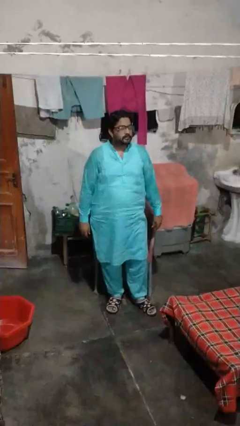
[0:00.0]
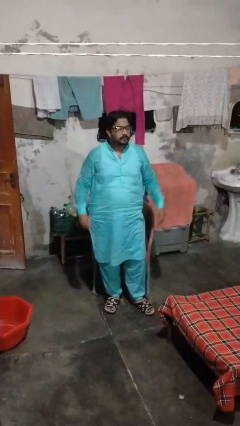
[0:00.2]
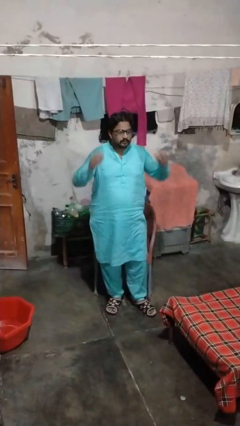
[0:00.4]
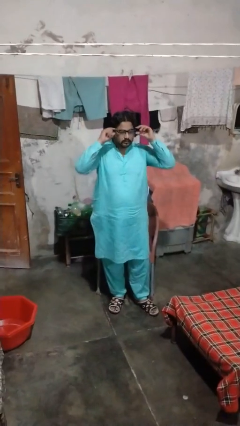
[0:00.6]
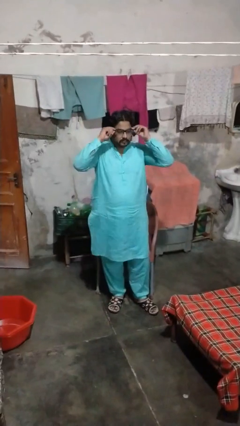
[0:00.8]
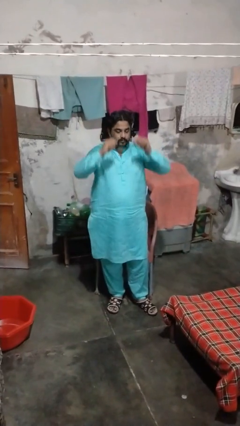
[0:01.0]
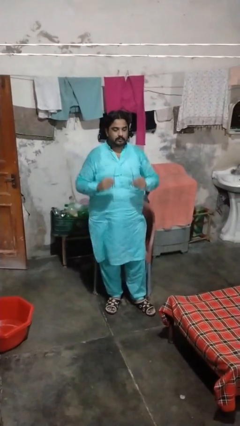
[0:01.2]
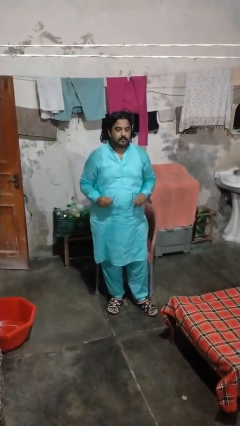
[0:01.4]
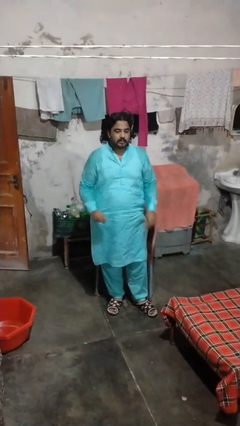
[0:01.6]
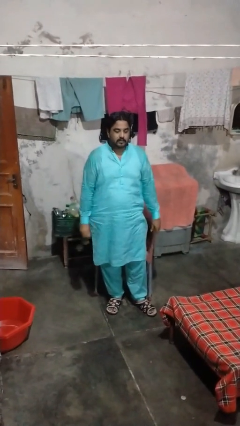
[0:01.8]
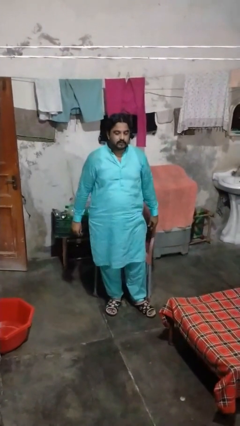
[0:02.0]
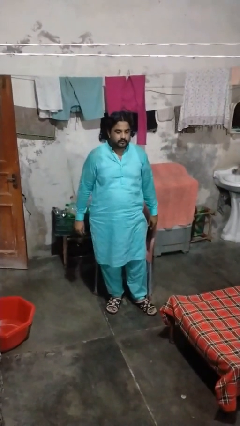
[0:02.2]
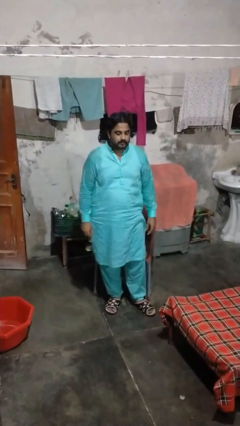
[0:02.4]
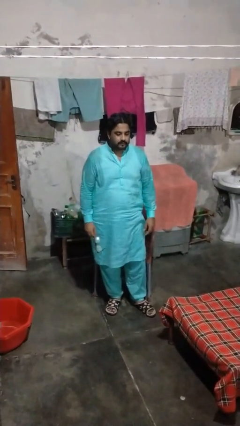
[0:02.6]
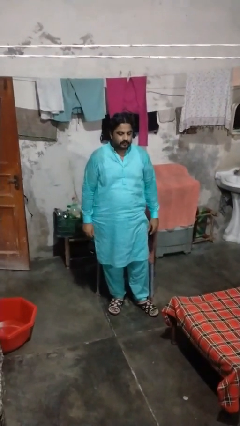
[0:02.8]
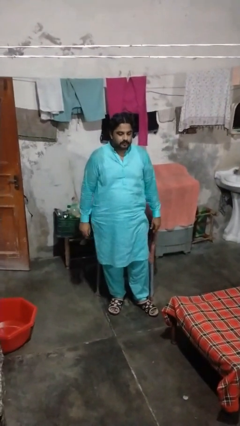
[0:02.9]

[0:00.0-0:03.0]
person takes off glasses

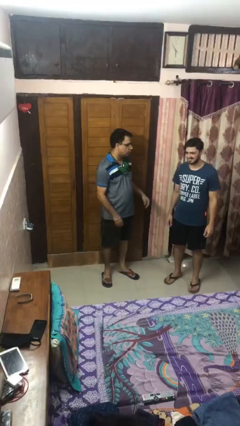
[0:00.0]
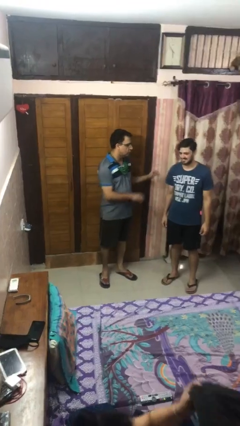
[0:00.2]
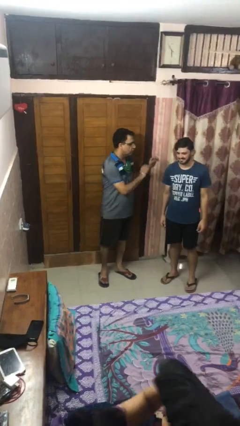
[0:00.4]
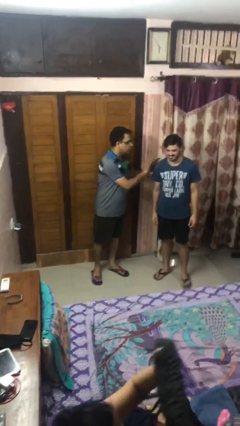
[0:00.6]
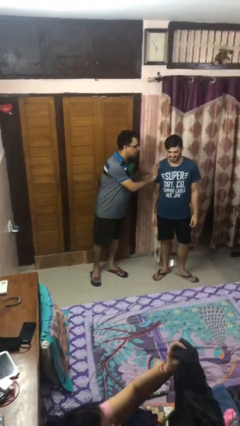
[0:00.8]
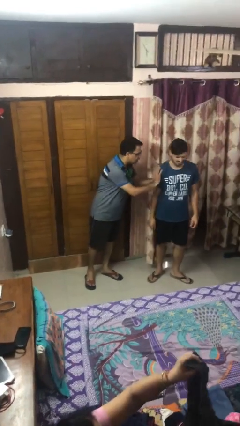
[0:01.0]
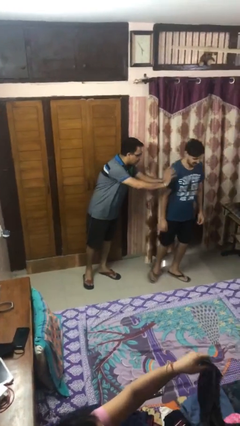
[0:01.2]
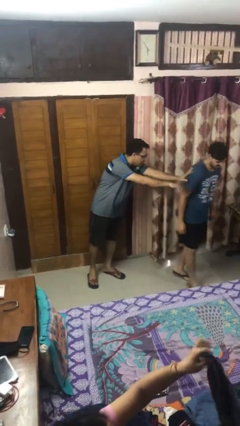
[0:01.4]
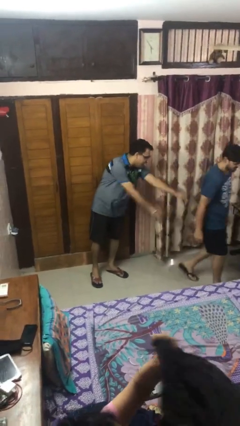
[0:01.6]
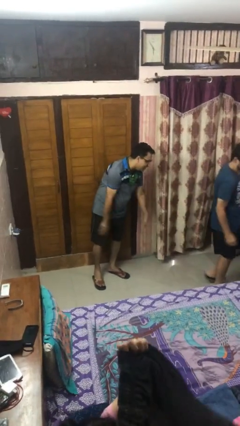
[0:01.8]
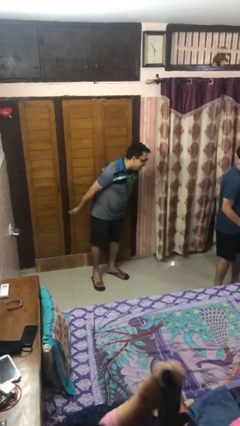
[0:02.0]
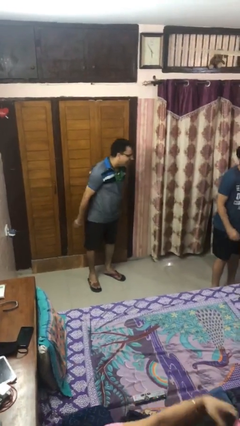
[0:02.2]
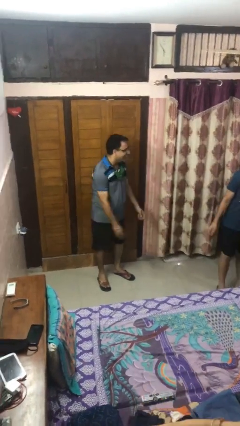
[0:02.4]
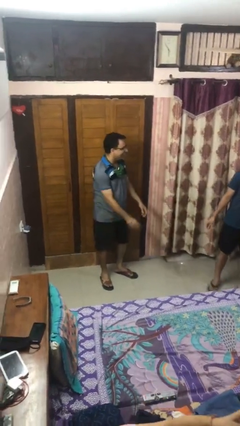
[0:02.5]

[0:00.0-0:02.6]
person shoves person

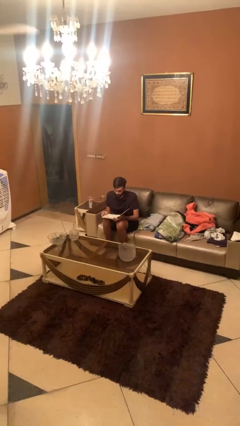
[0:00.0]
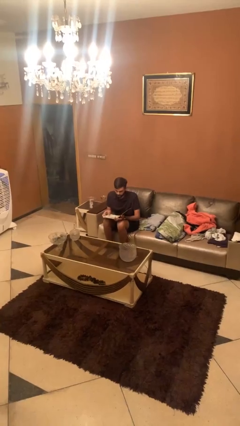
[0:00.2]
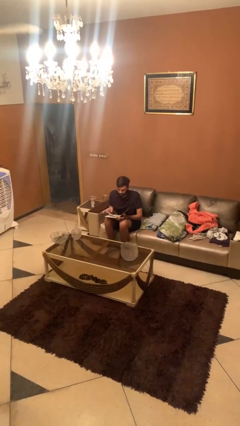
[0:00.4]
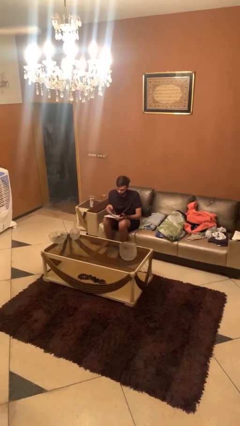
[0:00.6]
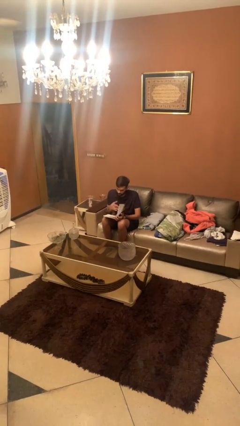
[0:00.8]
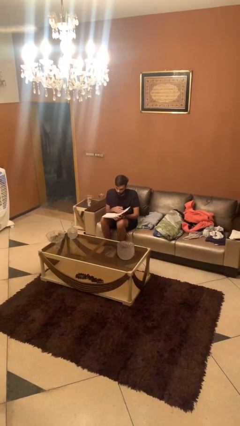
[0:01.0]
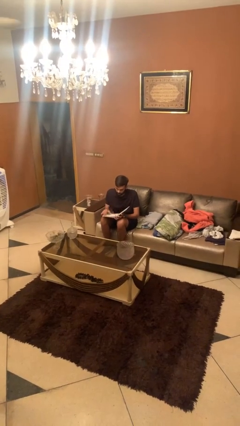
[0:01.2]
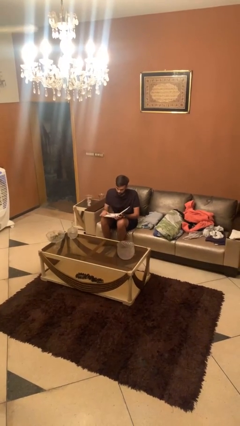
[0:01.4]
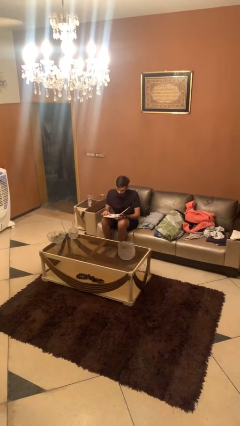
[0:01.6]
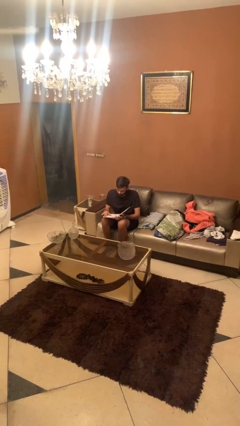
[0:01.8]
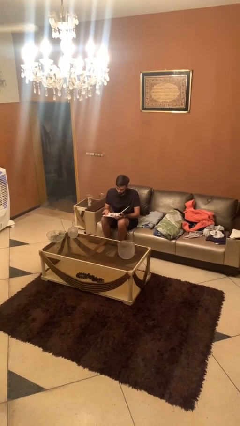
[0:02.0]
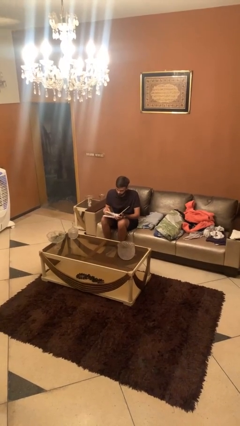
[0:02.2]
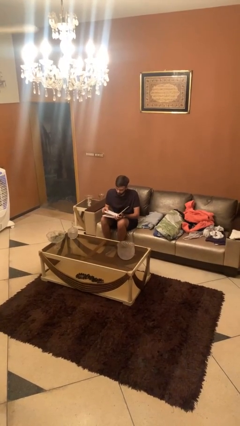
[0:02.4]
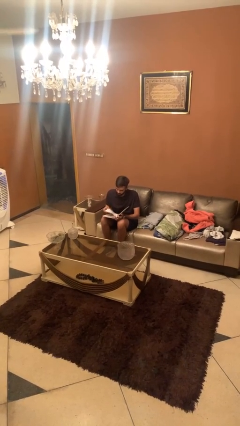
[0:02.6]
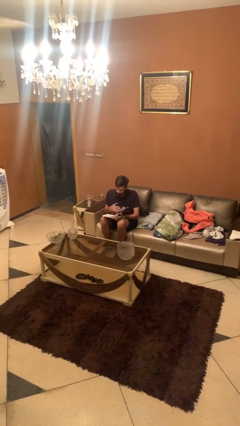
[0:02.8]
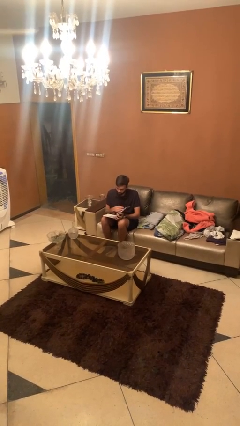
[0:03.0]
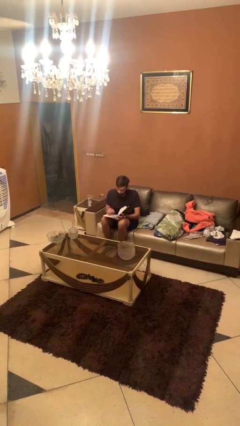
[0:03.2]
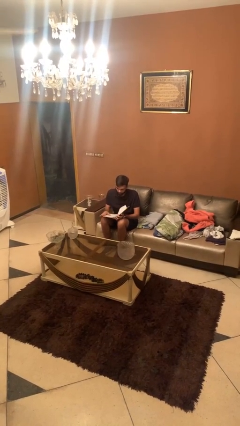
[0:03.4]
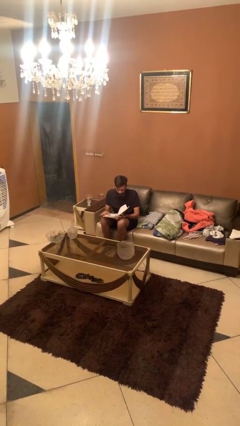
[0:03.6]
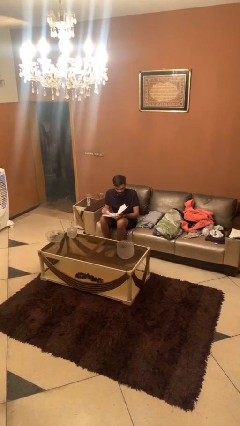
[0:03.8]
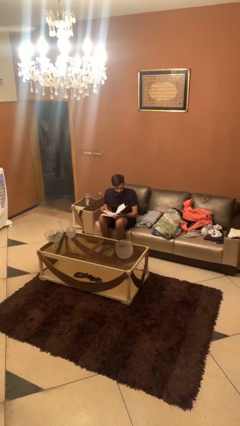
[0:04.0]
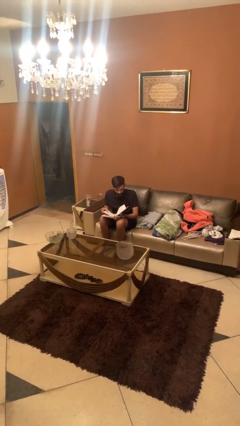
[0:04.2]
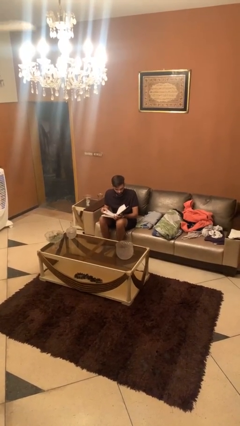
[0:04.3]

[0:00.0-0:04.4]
person reads document

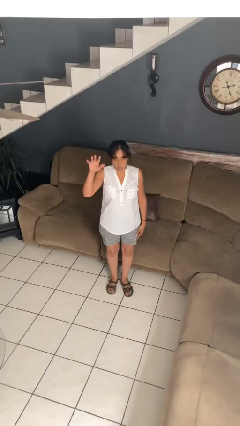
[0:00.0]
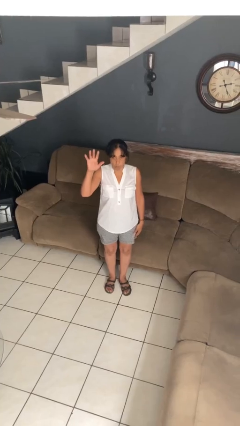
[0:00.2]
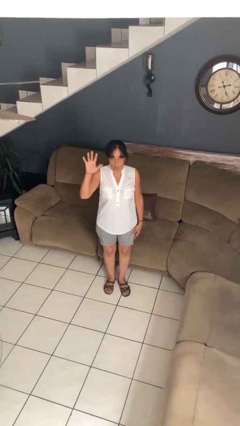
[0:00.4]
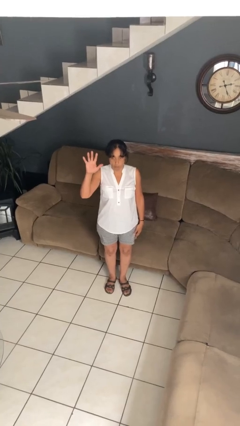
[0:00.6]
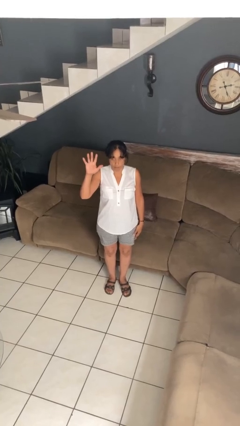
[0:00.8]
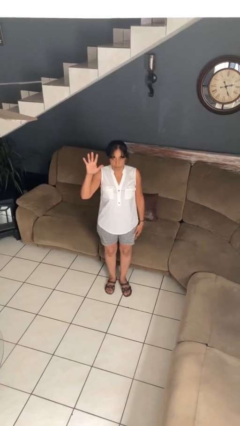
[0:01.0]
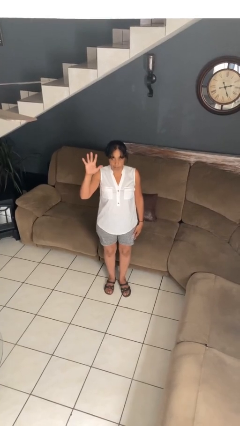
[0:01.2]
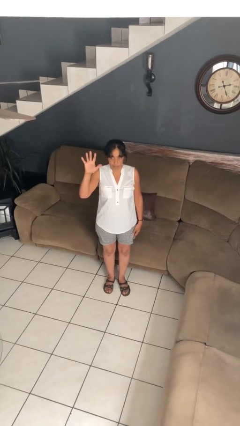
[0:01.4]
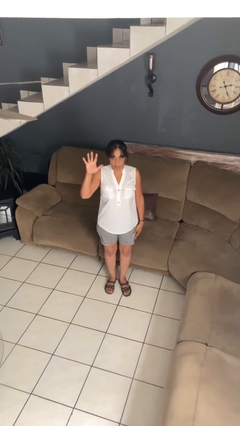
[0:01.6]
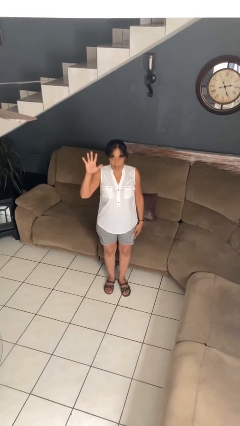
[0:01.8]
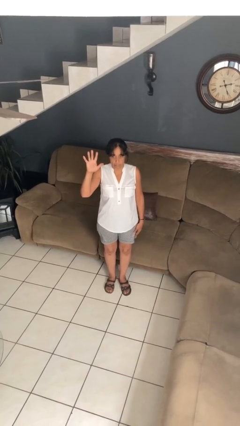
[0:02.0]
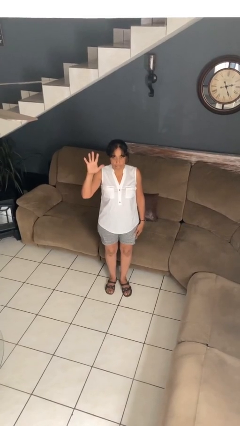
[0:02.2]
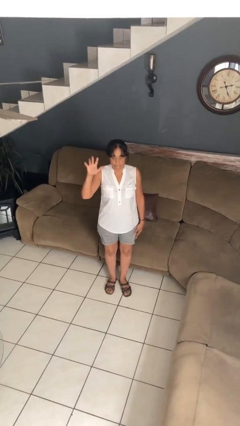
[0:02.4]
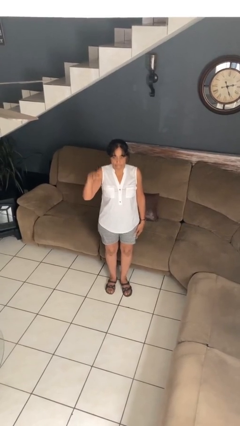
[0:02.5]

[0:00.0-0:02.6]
person gestures number five

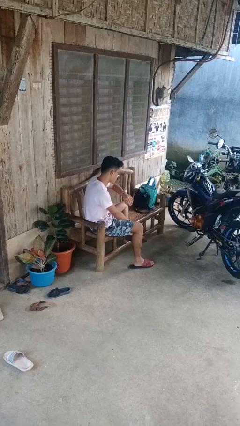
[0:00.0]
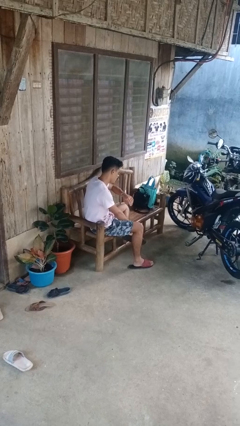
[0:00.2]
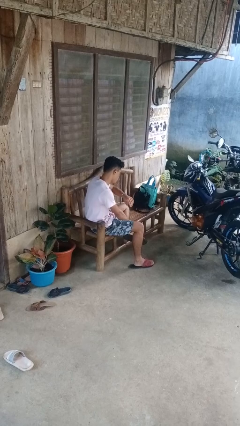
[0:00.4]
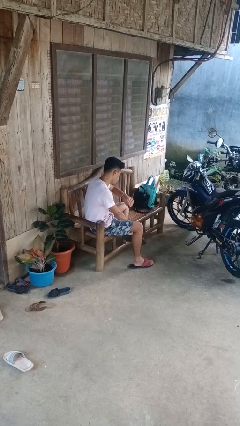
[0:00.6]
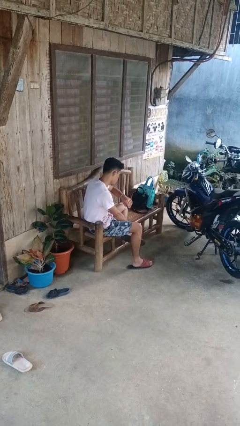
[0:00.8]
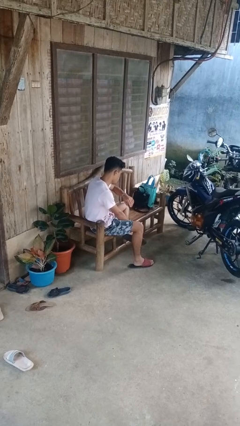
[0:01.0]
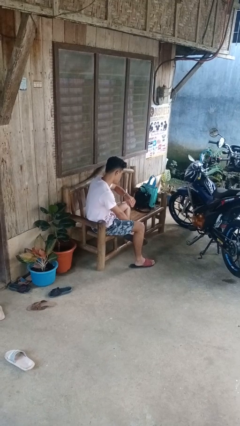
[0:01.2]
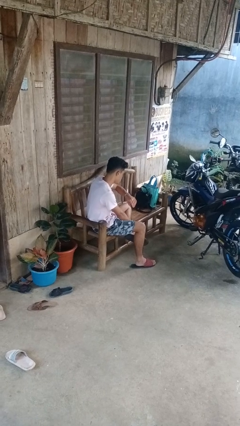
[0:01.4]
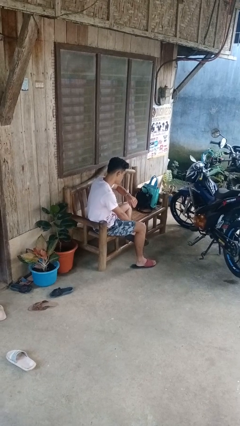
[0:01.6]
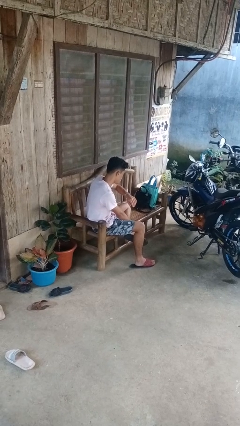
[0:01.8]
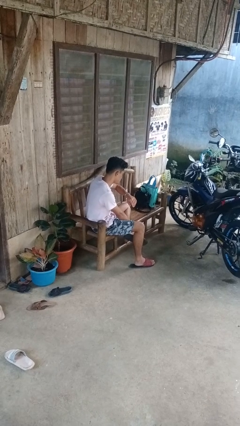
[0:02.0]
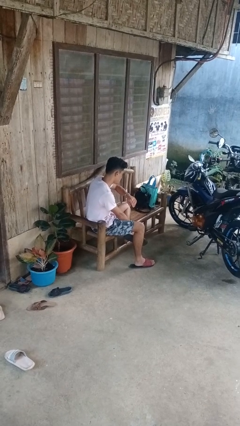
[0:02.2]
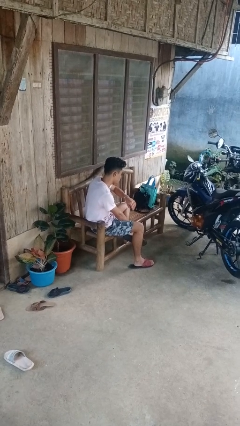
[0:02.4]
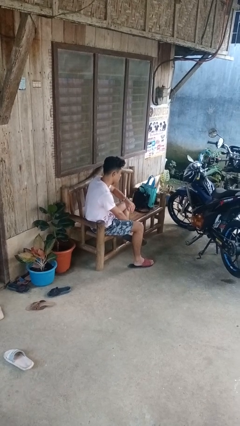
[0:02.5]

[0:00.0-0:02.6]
person looks at wristwatch

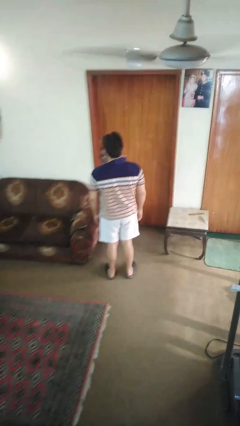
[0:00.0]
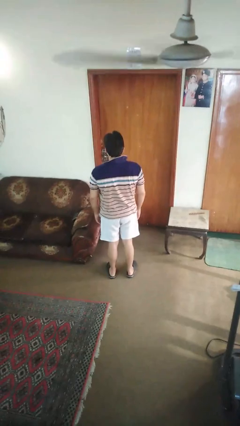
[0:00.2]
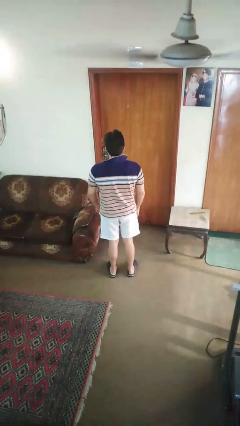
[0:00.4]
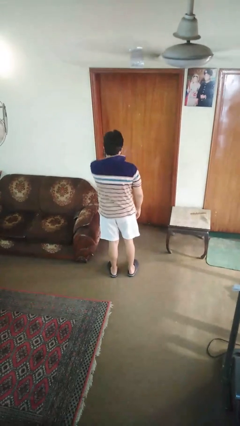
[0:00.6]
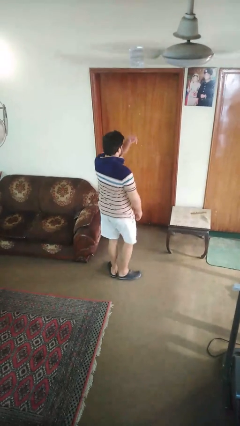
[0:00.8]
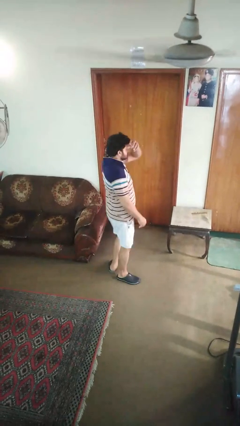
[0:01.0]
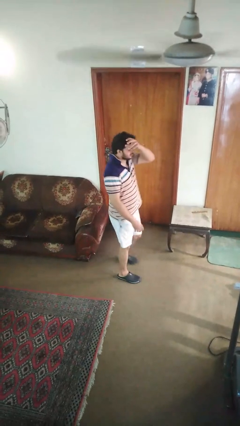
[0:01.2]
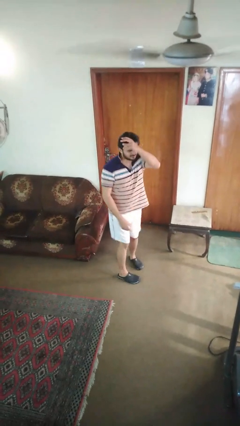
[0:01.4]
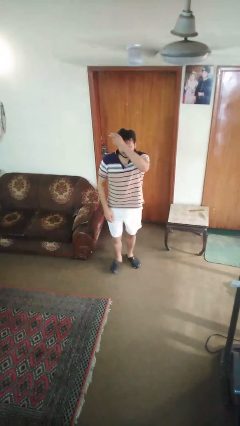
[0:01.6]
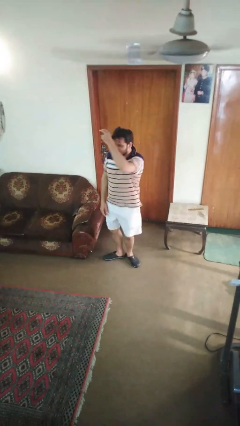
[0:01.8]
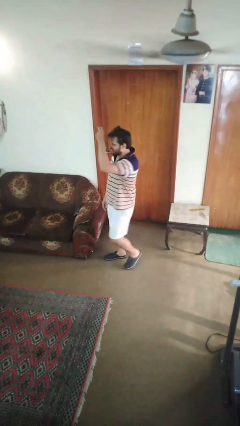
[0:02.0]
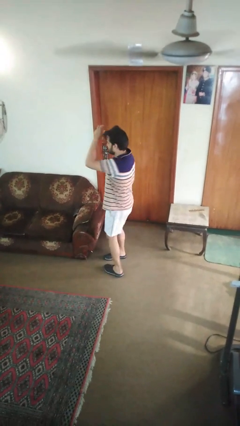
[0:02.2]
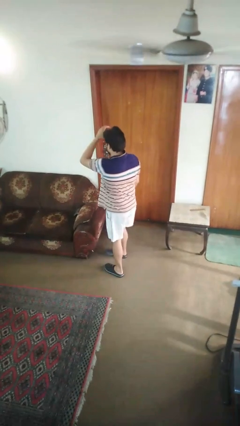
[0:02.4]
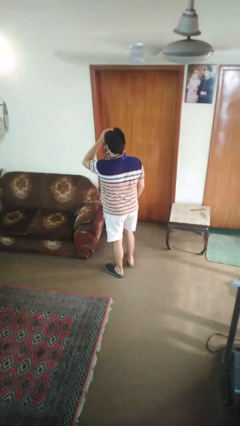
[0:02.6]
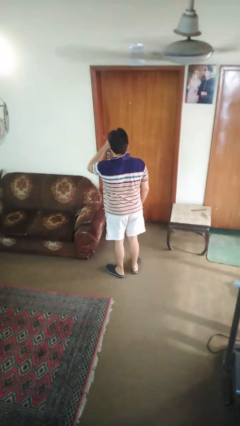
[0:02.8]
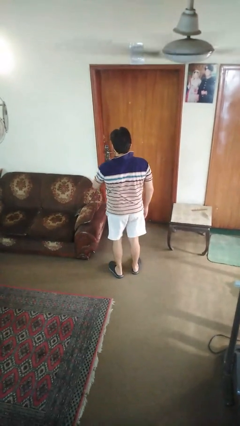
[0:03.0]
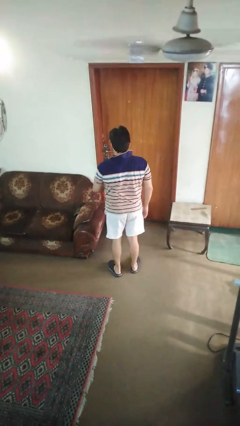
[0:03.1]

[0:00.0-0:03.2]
person twirls
